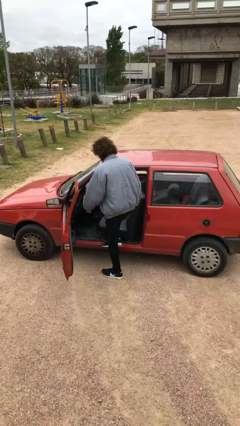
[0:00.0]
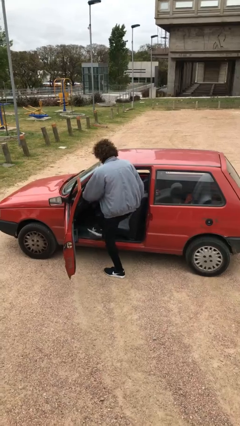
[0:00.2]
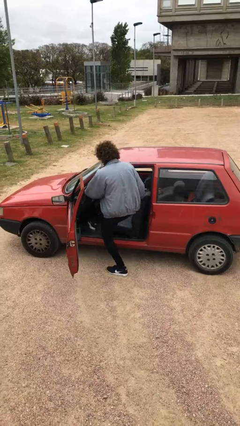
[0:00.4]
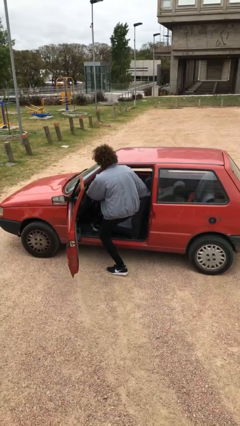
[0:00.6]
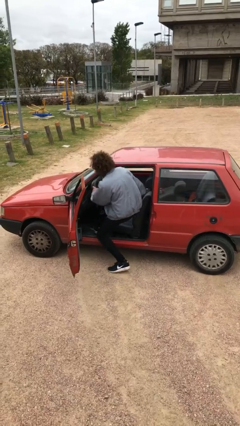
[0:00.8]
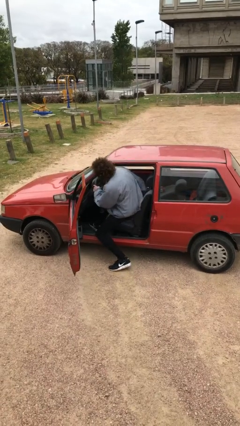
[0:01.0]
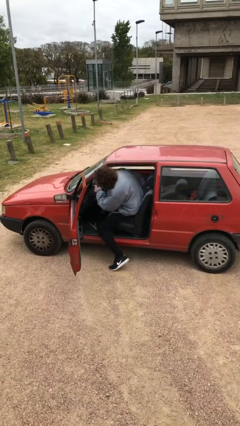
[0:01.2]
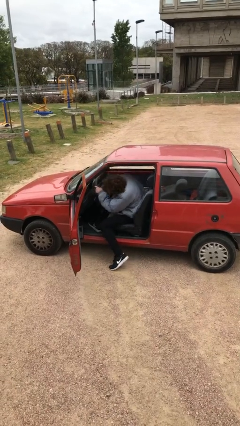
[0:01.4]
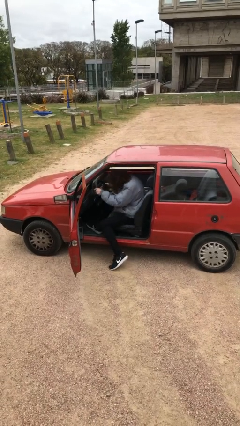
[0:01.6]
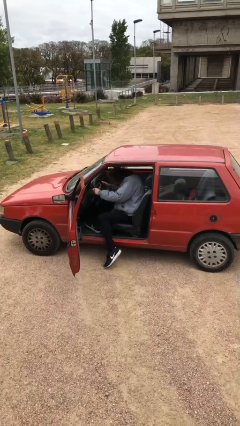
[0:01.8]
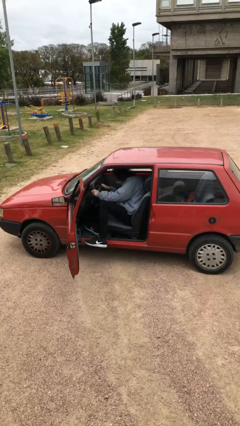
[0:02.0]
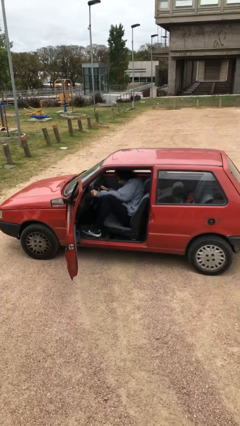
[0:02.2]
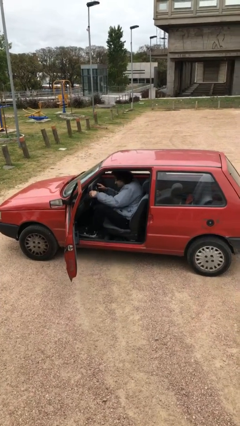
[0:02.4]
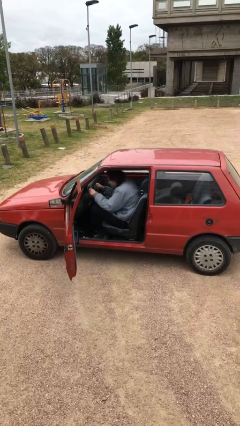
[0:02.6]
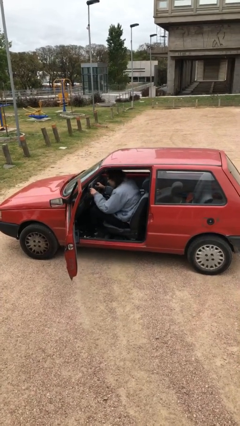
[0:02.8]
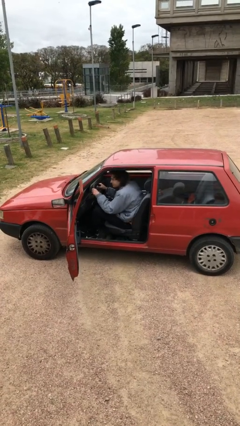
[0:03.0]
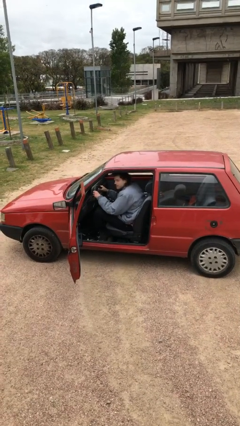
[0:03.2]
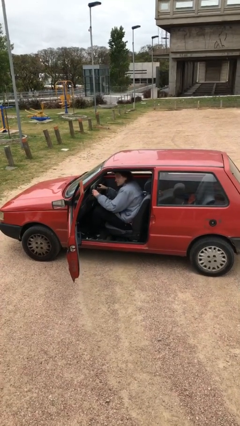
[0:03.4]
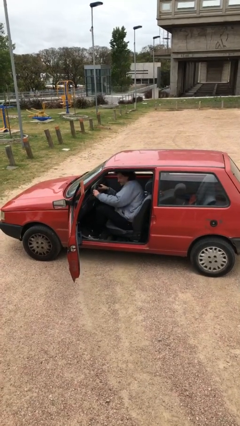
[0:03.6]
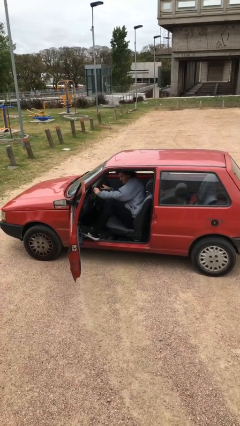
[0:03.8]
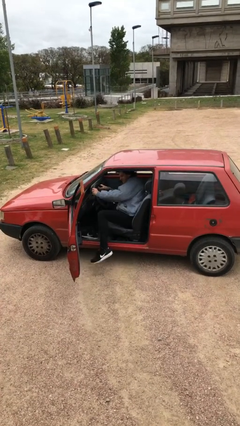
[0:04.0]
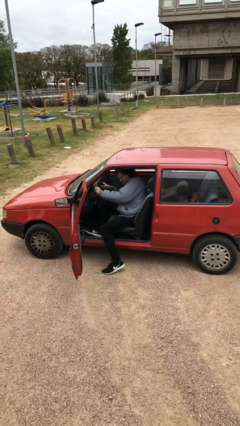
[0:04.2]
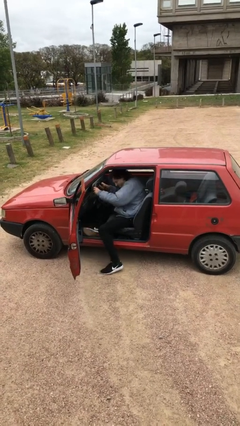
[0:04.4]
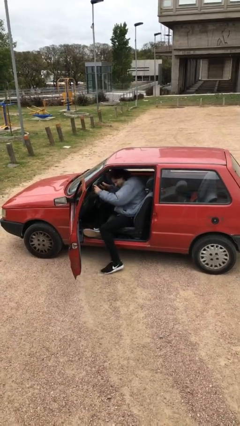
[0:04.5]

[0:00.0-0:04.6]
person enters car

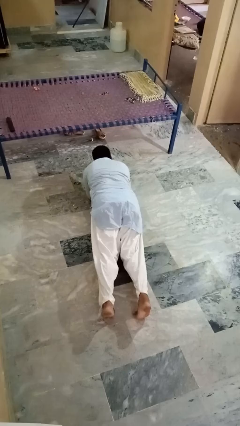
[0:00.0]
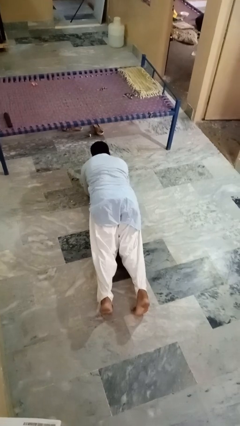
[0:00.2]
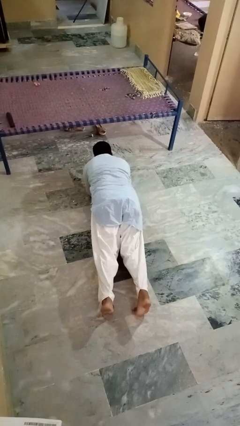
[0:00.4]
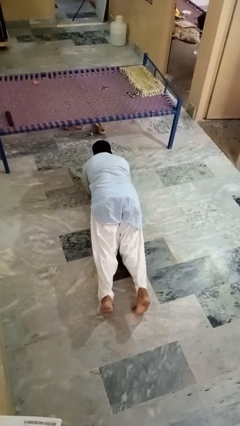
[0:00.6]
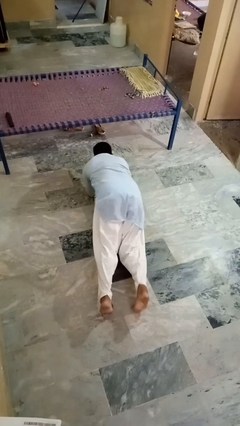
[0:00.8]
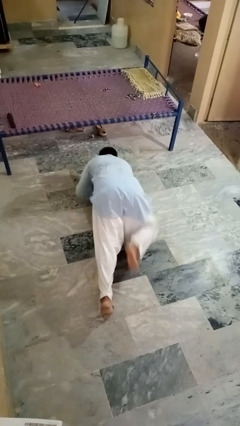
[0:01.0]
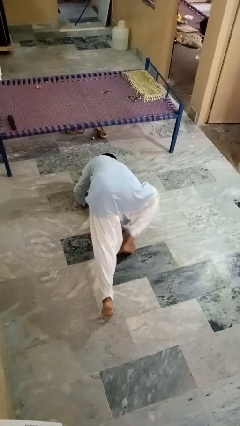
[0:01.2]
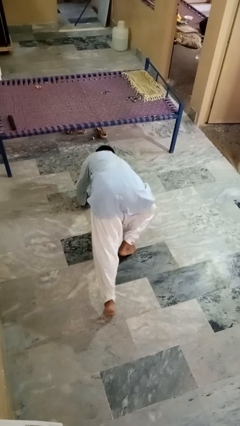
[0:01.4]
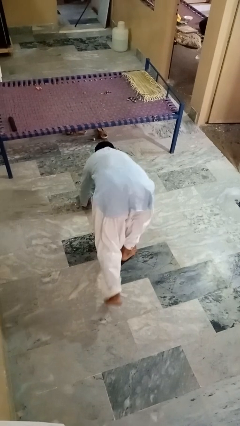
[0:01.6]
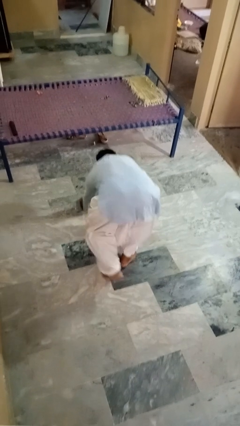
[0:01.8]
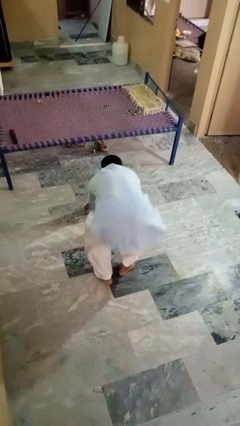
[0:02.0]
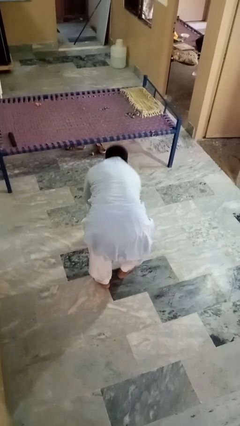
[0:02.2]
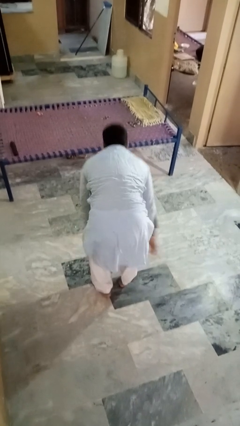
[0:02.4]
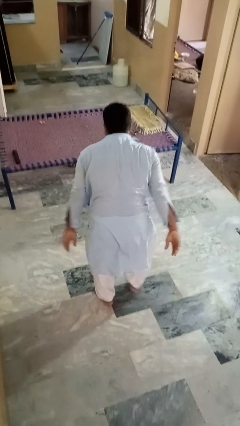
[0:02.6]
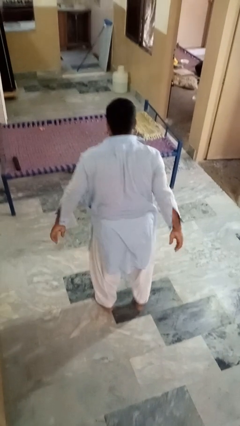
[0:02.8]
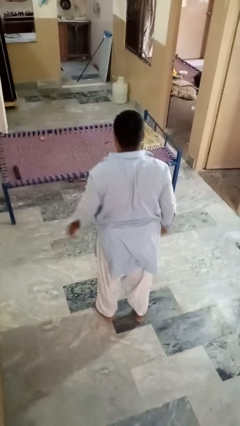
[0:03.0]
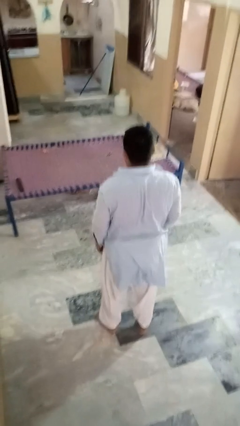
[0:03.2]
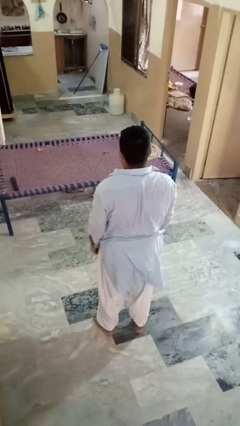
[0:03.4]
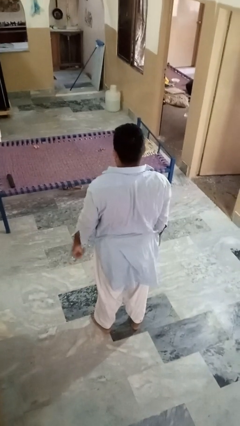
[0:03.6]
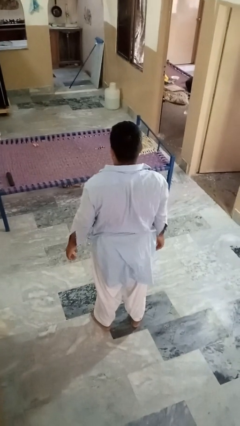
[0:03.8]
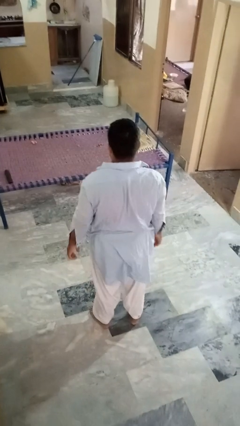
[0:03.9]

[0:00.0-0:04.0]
person stands up from floor

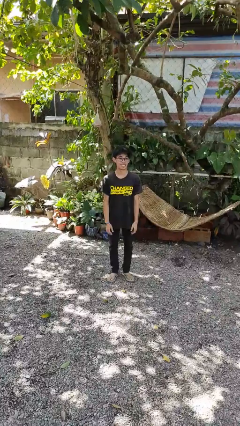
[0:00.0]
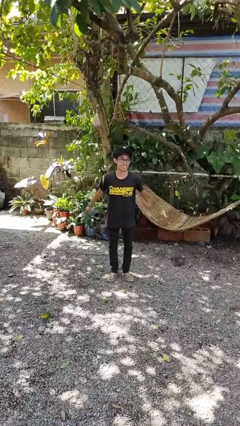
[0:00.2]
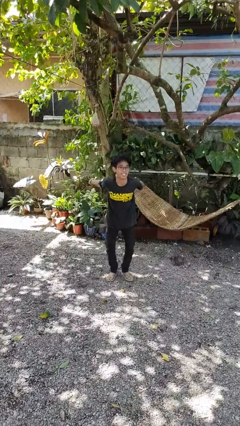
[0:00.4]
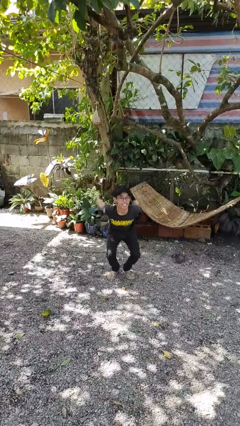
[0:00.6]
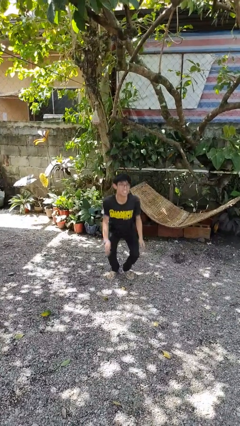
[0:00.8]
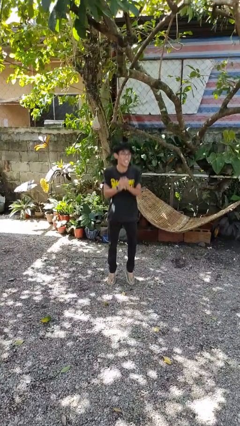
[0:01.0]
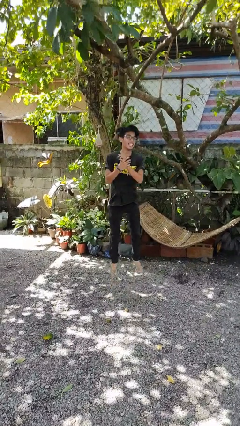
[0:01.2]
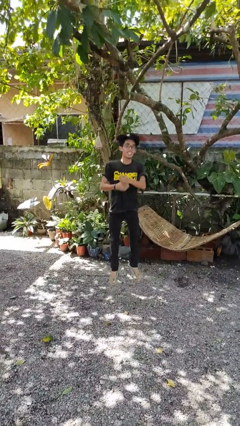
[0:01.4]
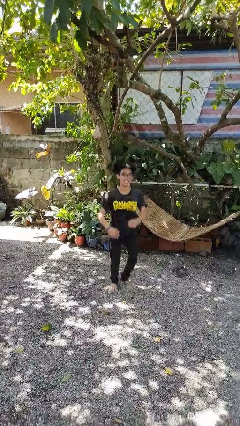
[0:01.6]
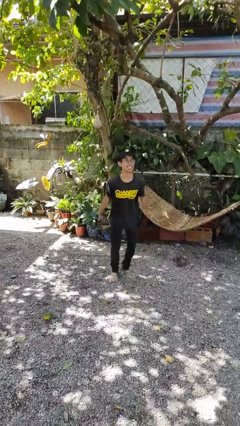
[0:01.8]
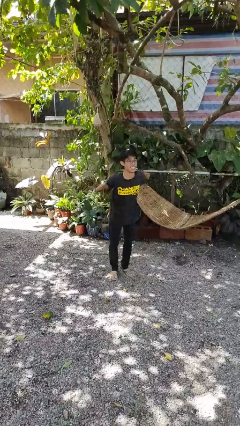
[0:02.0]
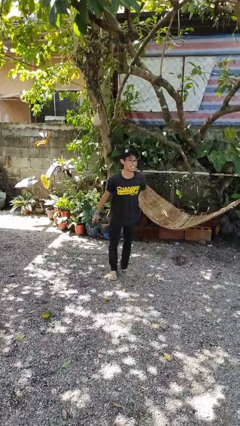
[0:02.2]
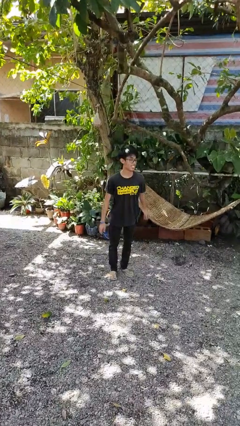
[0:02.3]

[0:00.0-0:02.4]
person jumps

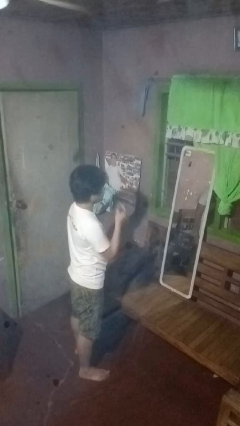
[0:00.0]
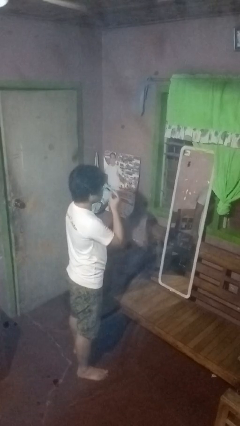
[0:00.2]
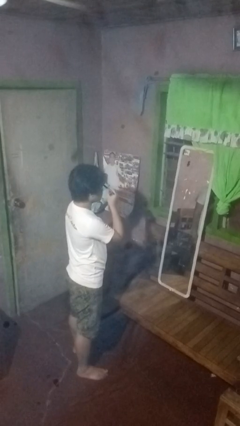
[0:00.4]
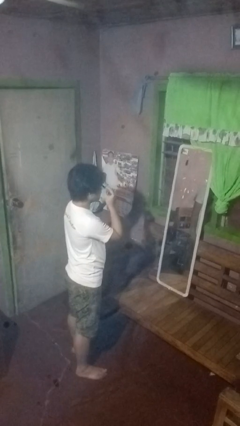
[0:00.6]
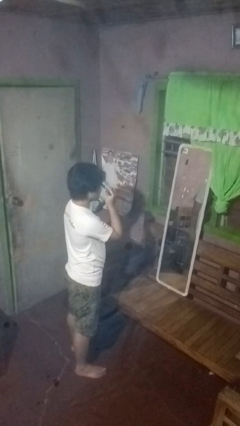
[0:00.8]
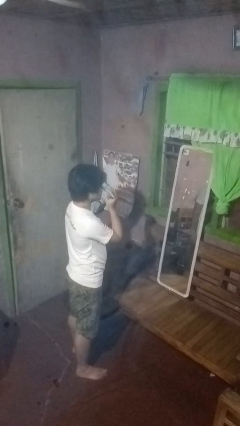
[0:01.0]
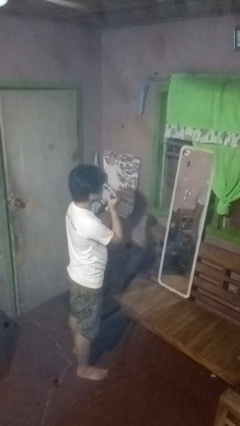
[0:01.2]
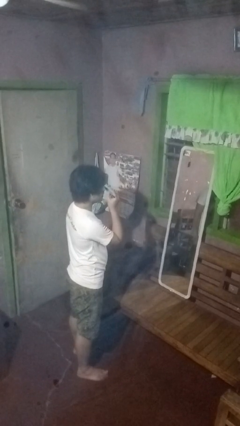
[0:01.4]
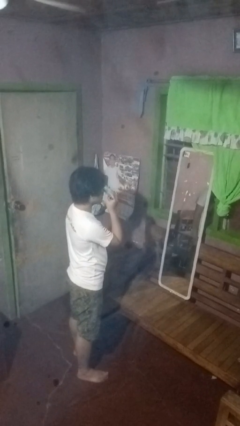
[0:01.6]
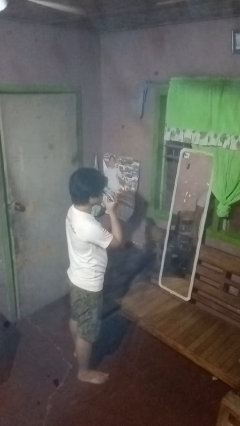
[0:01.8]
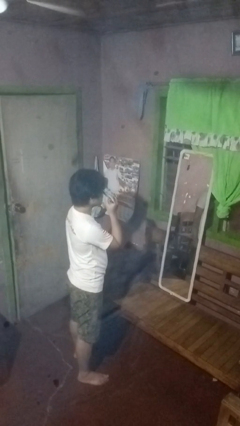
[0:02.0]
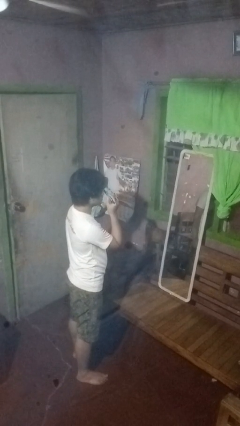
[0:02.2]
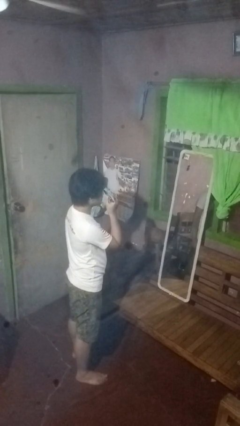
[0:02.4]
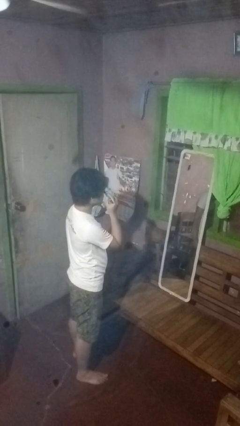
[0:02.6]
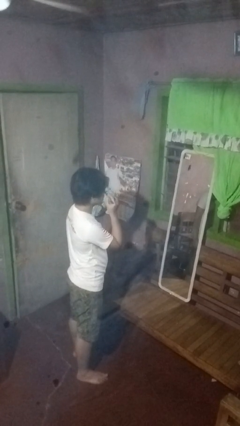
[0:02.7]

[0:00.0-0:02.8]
person applies eye makeup

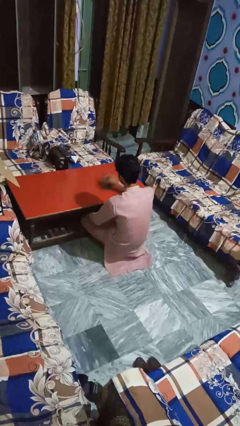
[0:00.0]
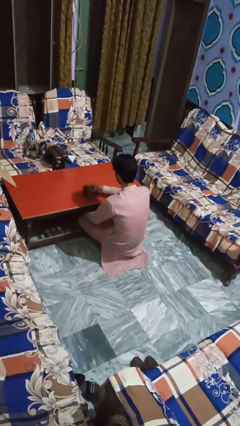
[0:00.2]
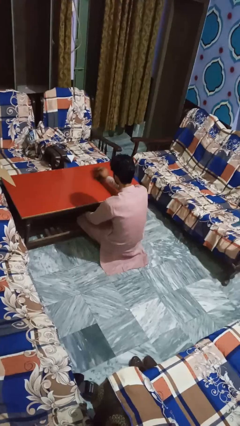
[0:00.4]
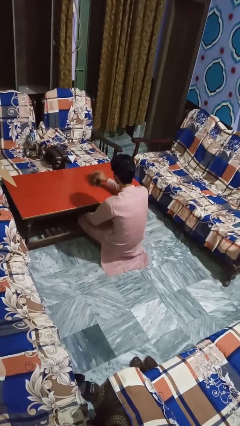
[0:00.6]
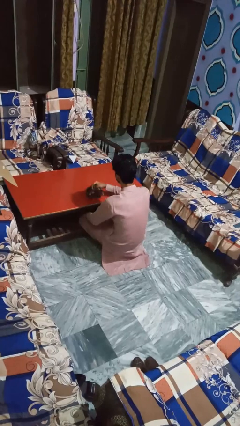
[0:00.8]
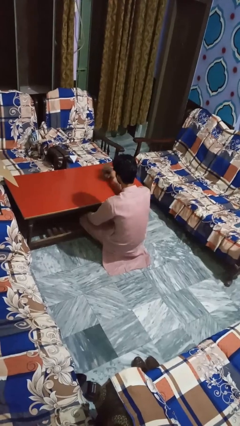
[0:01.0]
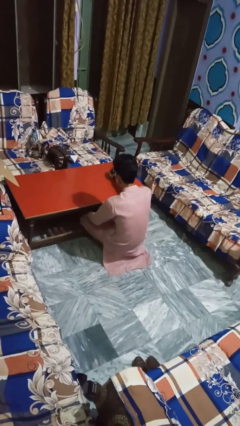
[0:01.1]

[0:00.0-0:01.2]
person cleans table with rag

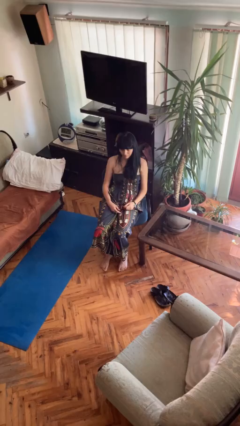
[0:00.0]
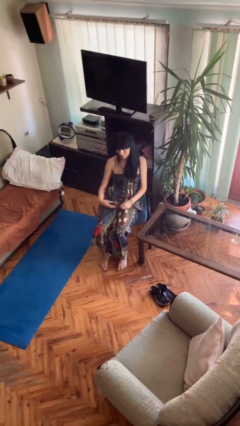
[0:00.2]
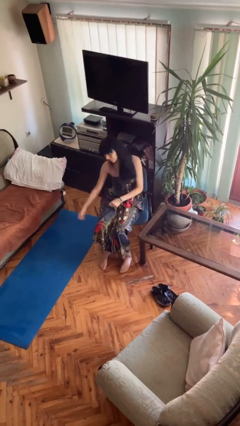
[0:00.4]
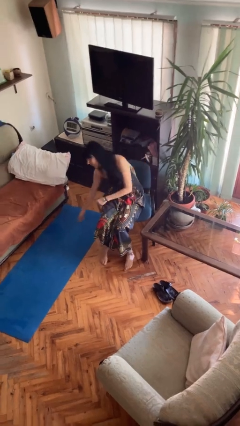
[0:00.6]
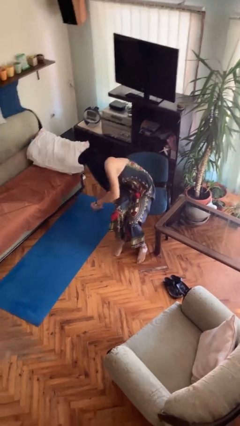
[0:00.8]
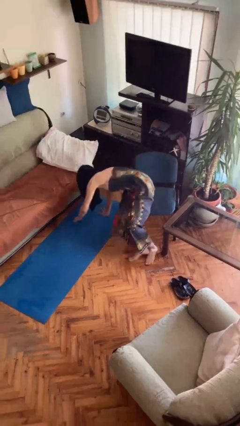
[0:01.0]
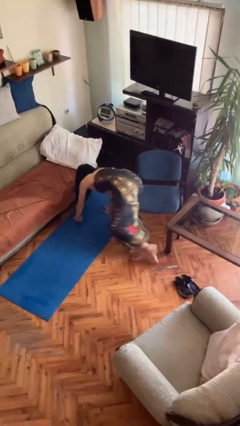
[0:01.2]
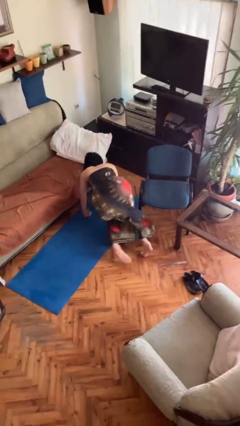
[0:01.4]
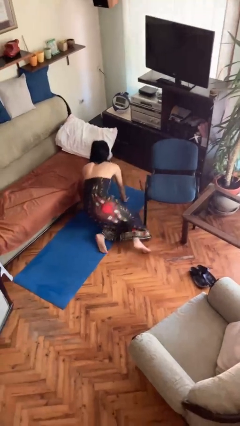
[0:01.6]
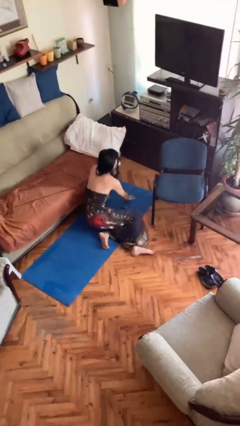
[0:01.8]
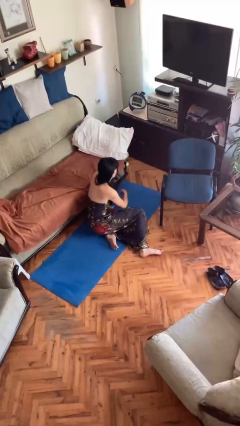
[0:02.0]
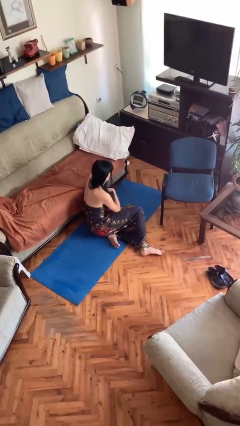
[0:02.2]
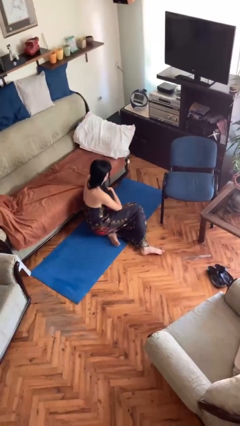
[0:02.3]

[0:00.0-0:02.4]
person falls from chair
